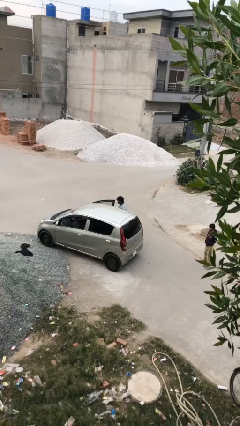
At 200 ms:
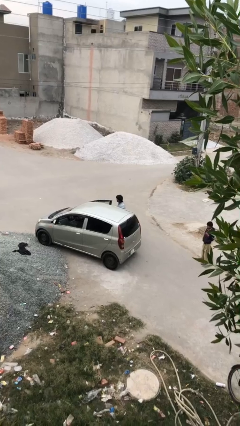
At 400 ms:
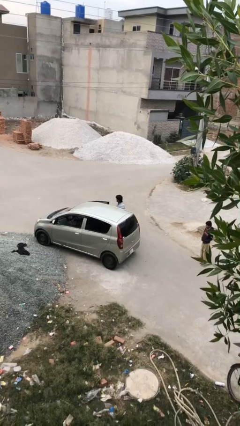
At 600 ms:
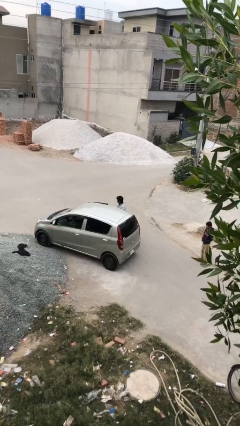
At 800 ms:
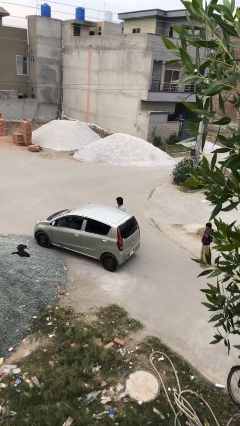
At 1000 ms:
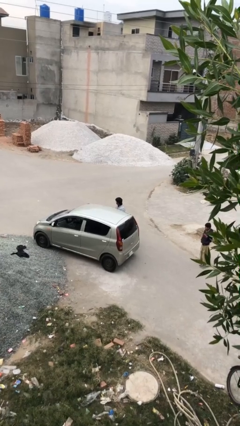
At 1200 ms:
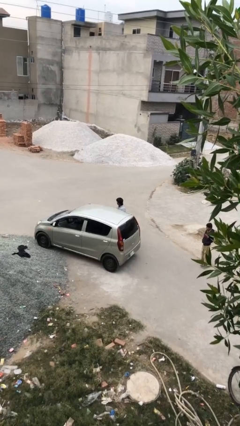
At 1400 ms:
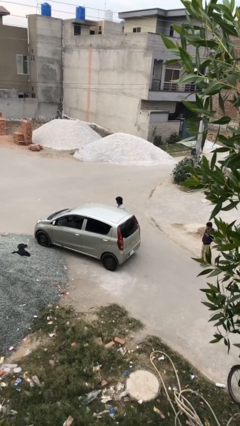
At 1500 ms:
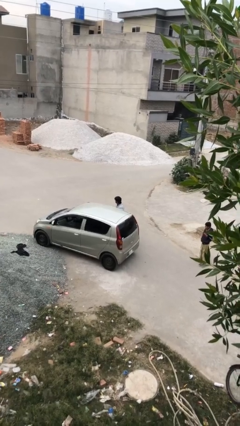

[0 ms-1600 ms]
person closes car door

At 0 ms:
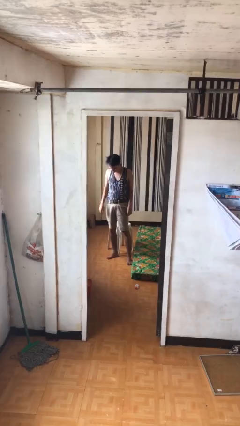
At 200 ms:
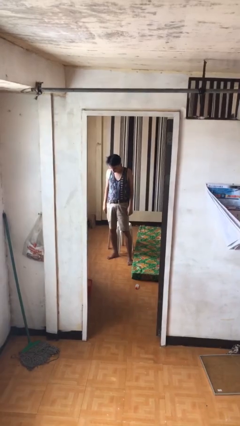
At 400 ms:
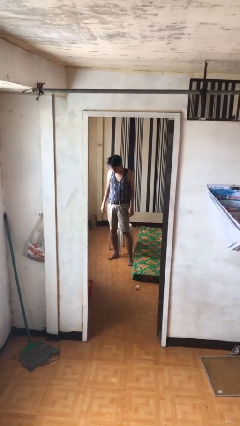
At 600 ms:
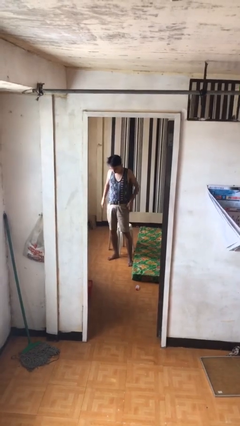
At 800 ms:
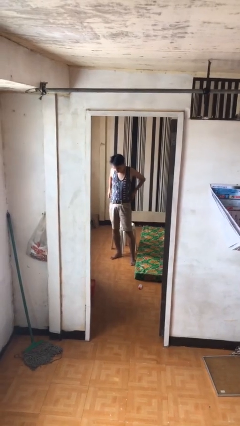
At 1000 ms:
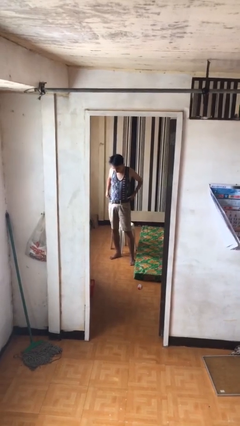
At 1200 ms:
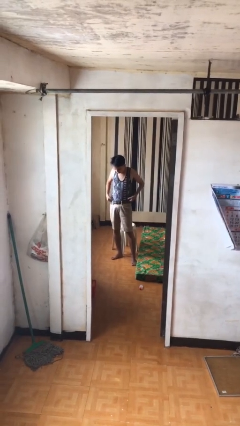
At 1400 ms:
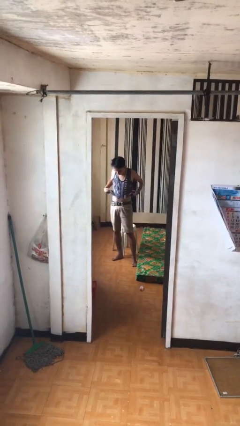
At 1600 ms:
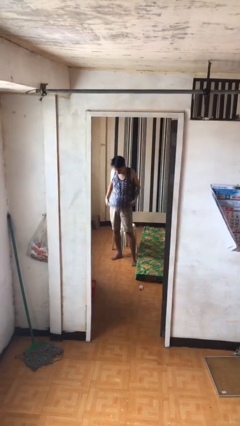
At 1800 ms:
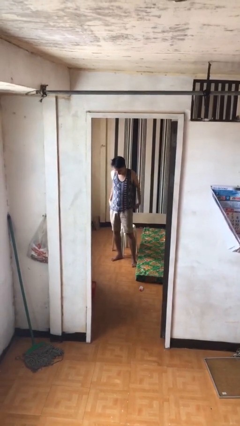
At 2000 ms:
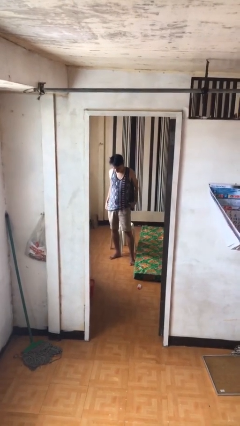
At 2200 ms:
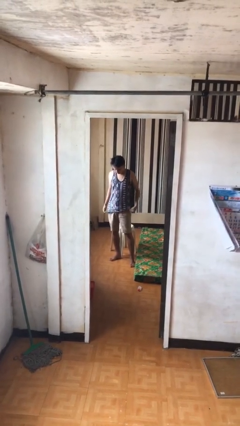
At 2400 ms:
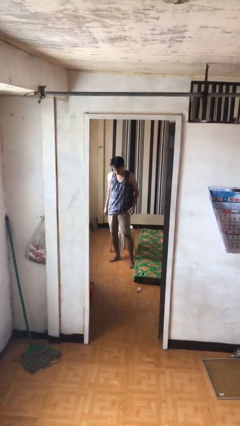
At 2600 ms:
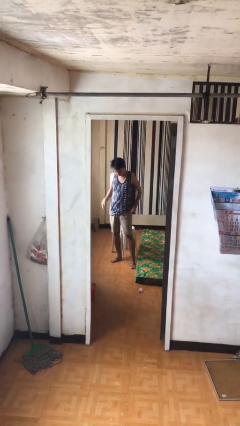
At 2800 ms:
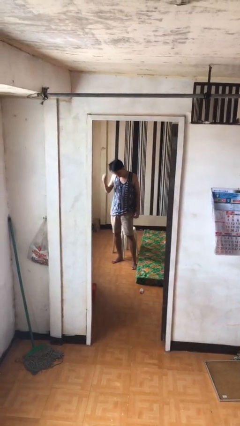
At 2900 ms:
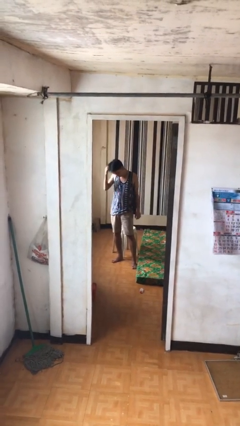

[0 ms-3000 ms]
person untucks shirt

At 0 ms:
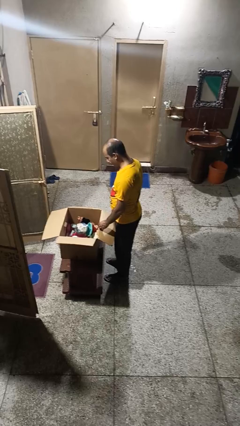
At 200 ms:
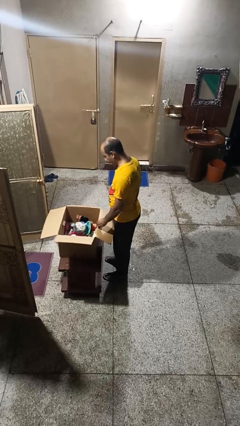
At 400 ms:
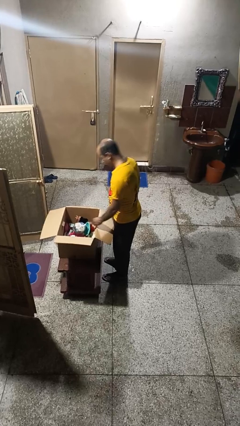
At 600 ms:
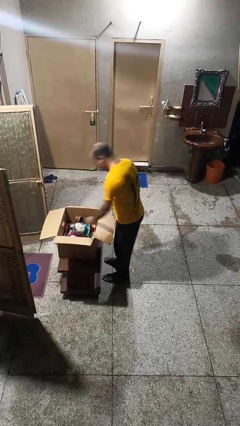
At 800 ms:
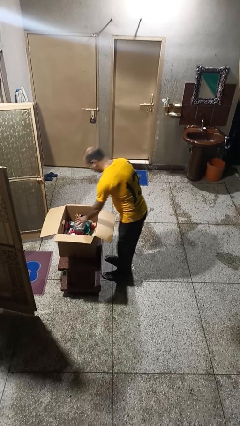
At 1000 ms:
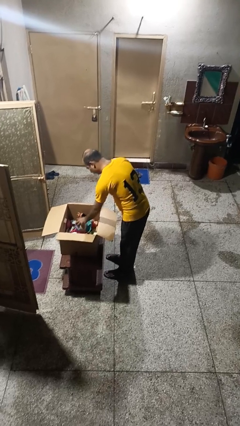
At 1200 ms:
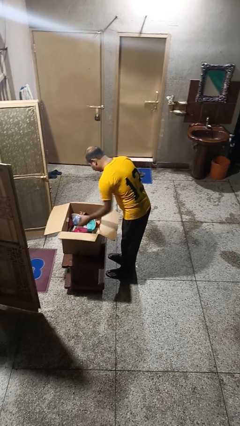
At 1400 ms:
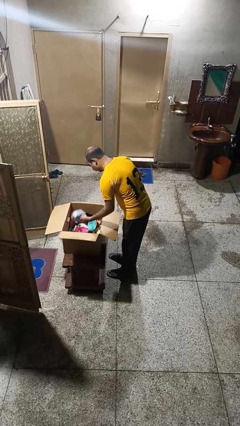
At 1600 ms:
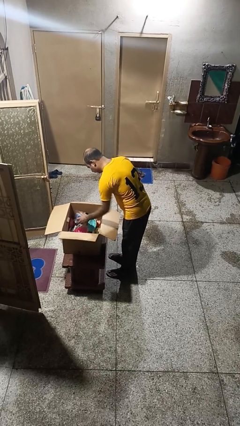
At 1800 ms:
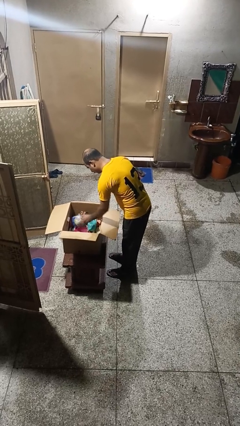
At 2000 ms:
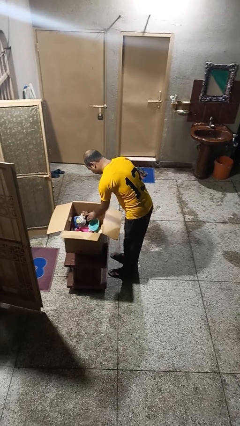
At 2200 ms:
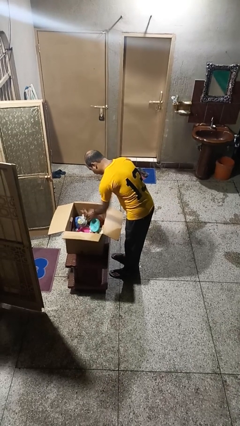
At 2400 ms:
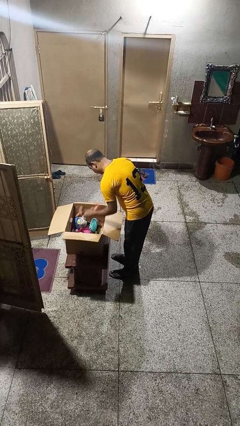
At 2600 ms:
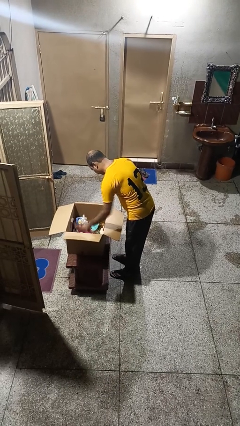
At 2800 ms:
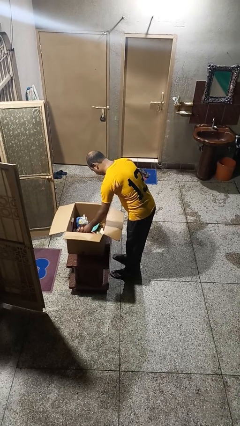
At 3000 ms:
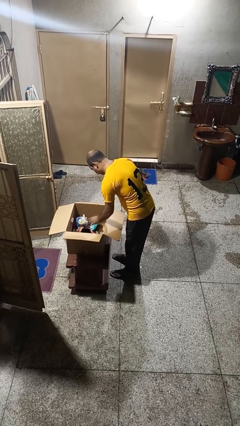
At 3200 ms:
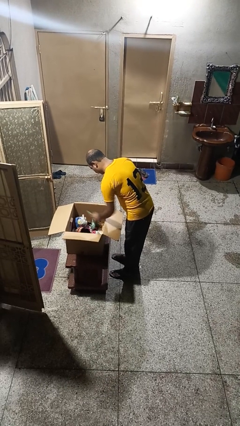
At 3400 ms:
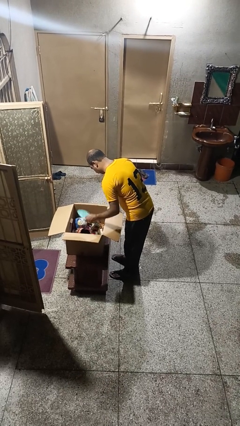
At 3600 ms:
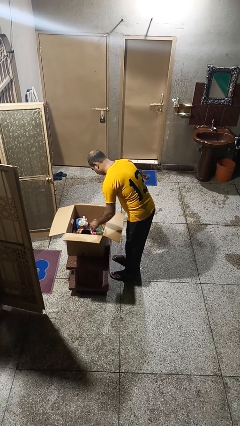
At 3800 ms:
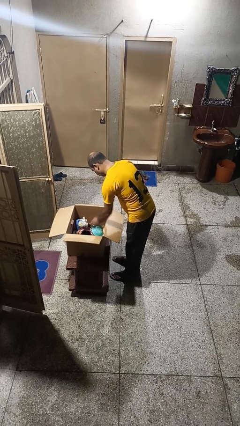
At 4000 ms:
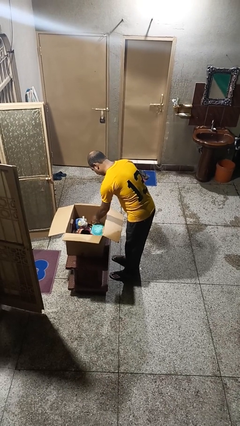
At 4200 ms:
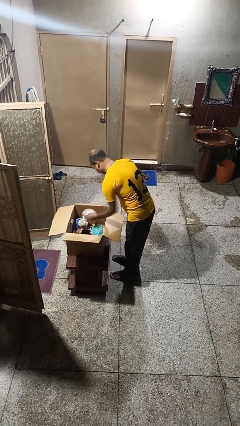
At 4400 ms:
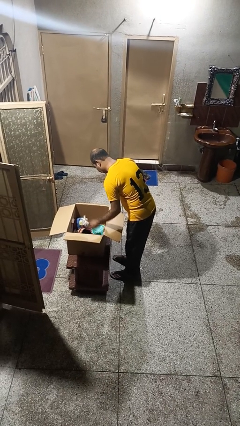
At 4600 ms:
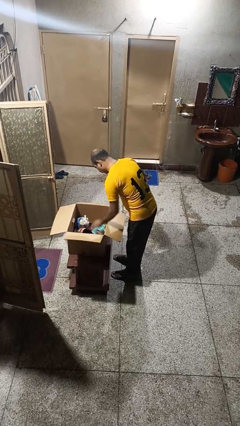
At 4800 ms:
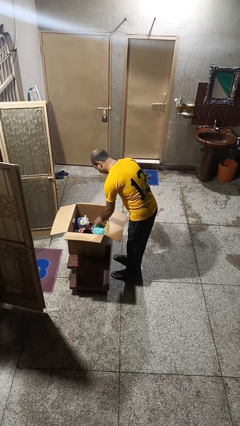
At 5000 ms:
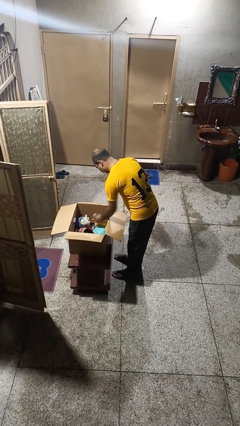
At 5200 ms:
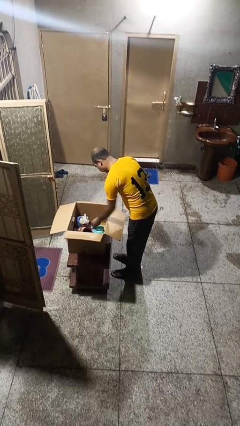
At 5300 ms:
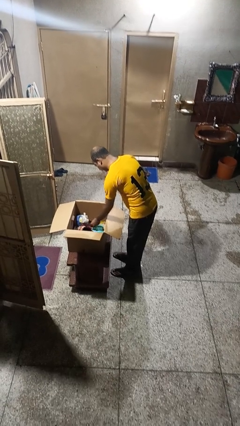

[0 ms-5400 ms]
person searches in box

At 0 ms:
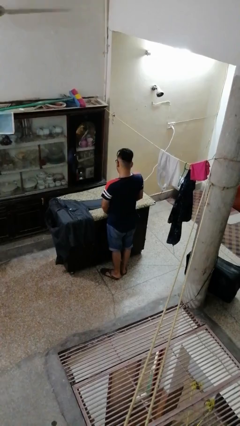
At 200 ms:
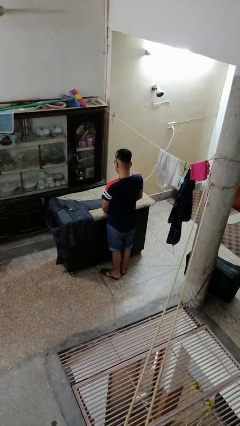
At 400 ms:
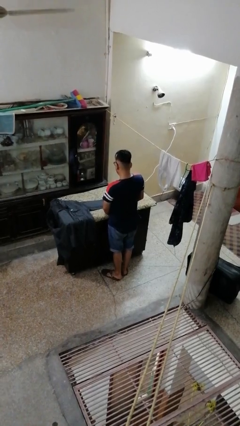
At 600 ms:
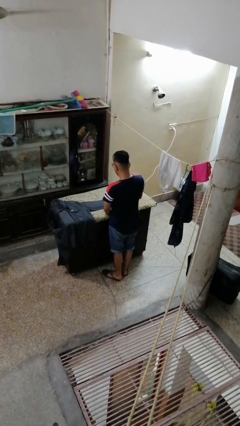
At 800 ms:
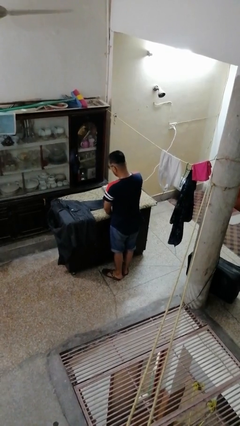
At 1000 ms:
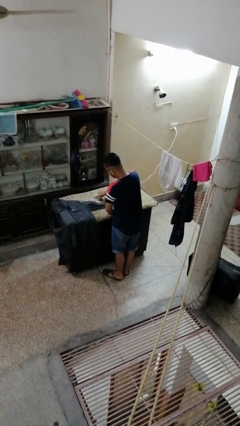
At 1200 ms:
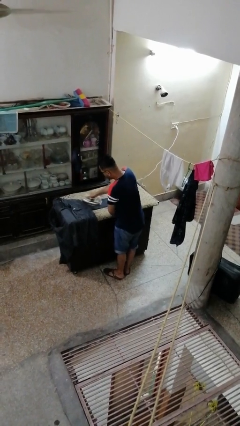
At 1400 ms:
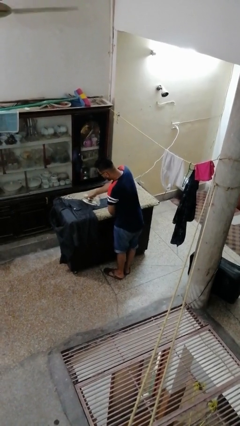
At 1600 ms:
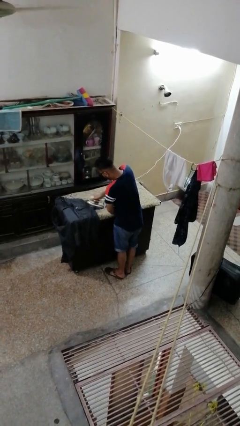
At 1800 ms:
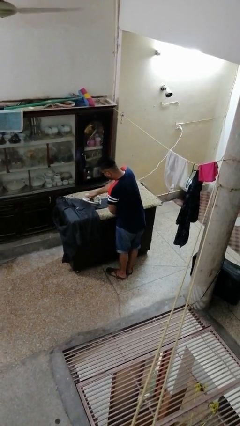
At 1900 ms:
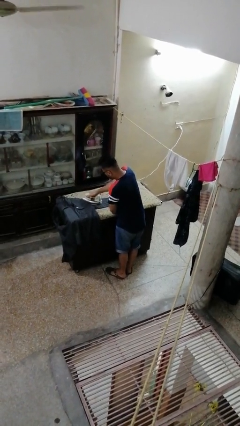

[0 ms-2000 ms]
person irons clothes

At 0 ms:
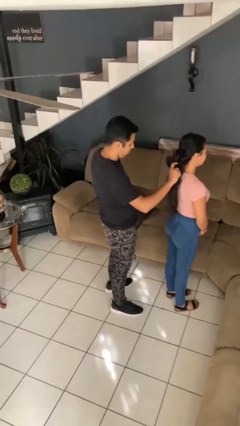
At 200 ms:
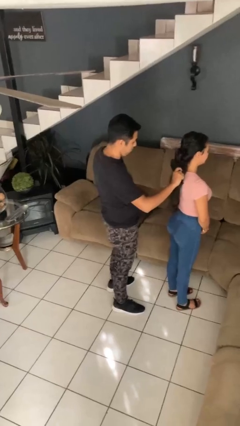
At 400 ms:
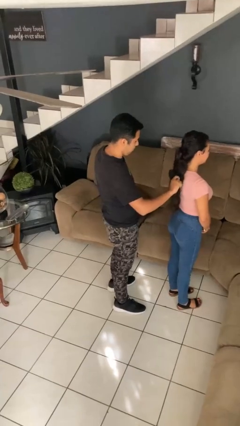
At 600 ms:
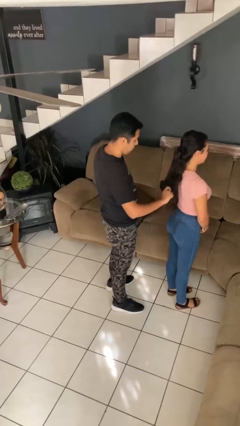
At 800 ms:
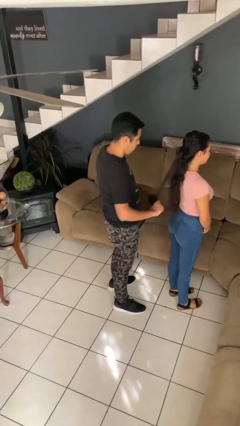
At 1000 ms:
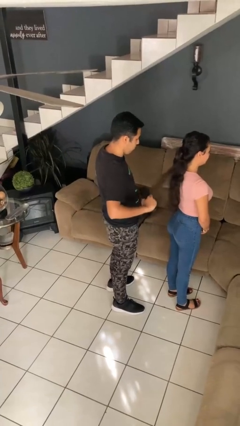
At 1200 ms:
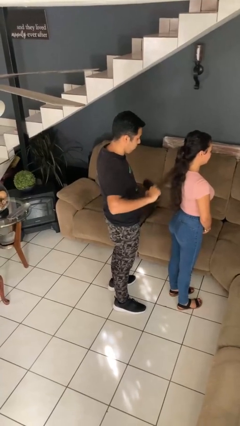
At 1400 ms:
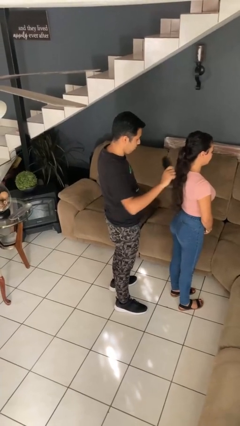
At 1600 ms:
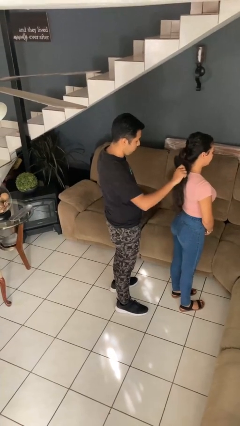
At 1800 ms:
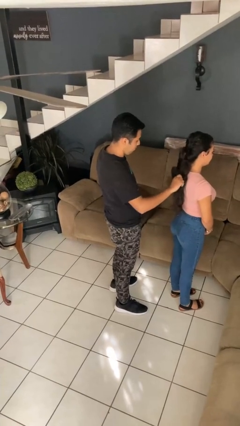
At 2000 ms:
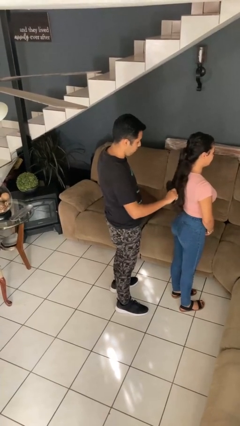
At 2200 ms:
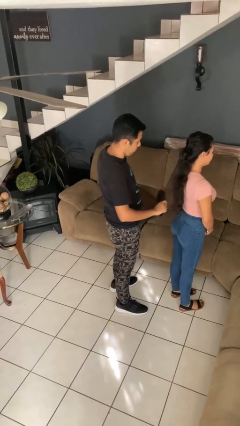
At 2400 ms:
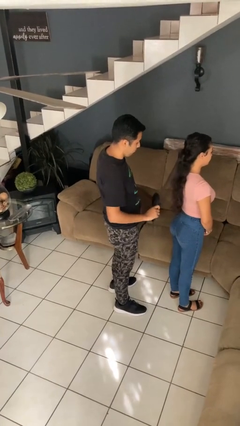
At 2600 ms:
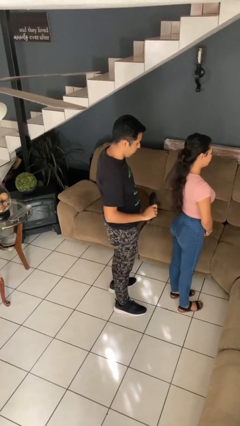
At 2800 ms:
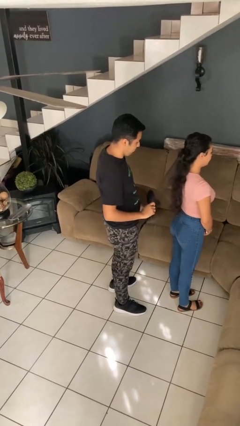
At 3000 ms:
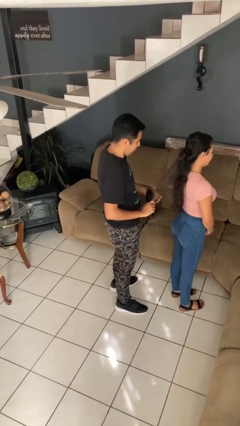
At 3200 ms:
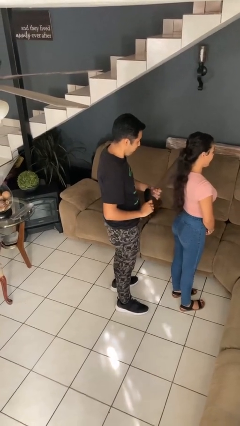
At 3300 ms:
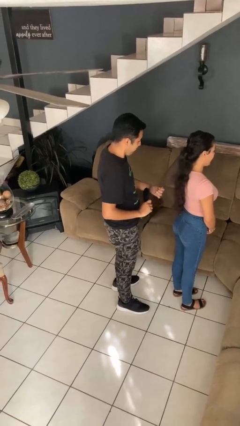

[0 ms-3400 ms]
person brushes hair of person

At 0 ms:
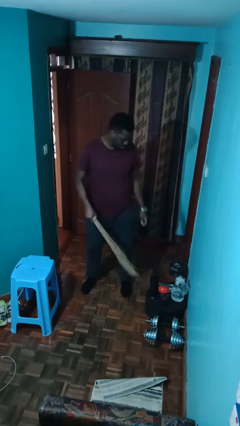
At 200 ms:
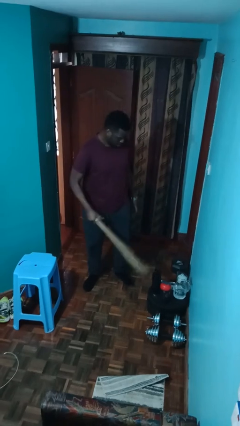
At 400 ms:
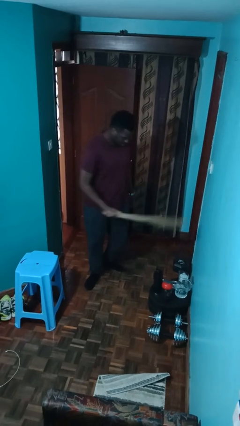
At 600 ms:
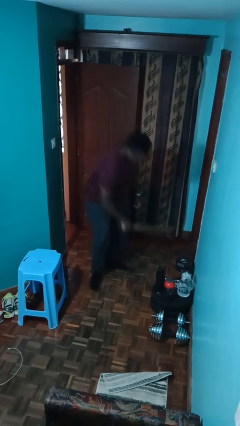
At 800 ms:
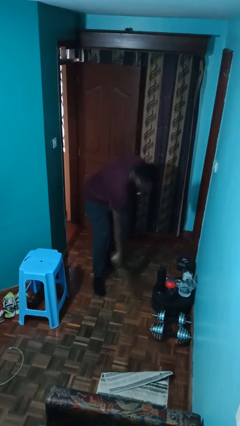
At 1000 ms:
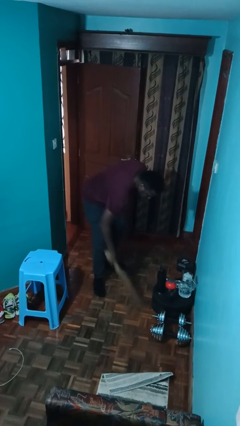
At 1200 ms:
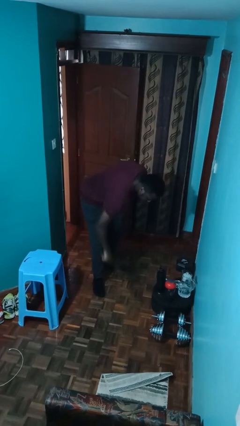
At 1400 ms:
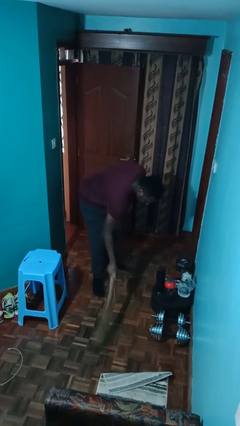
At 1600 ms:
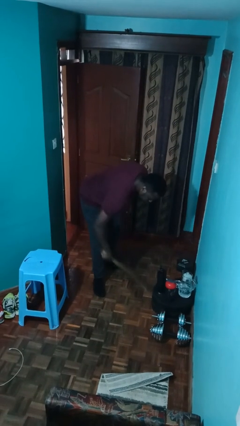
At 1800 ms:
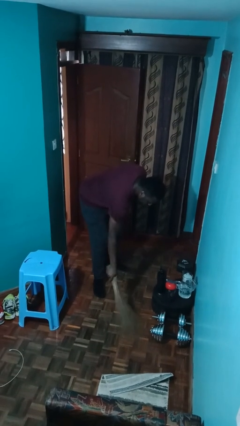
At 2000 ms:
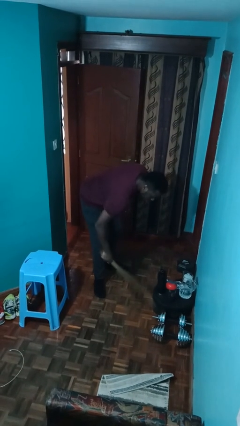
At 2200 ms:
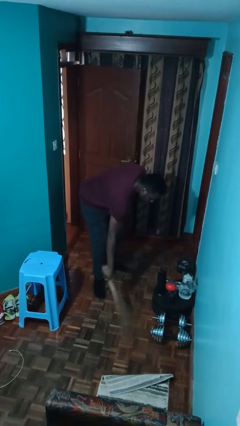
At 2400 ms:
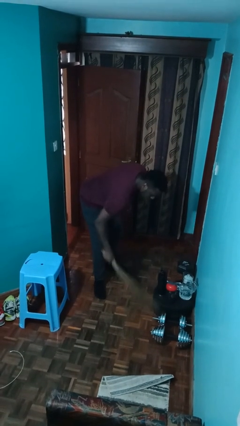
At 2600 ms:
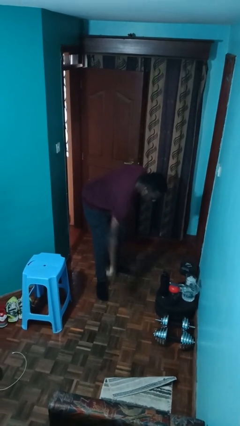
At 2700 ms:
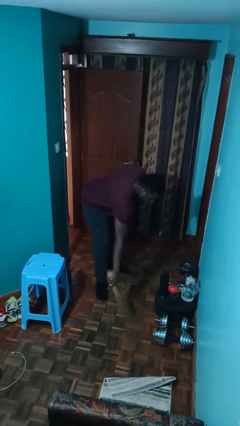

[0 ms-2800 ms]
person sweeps floor
